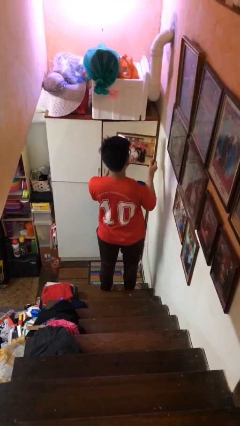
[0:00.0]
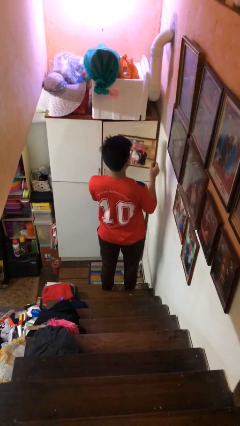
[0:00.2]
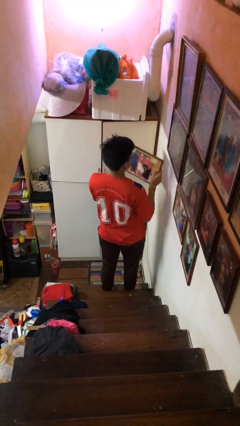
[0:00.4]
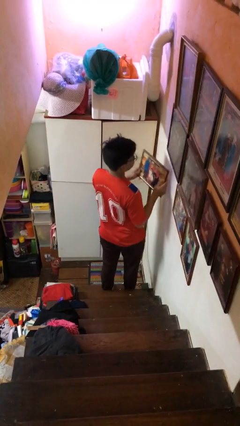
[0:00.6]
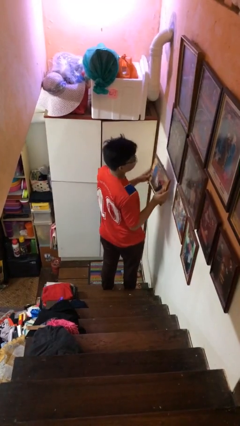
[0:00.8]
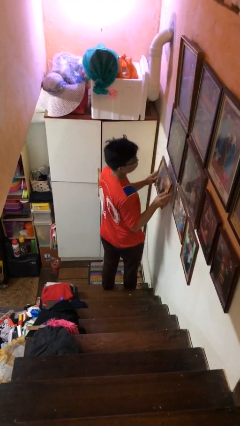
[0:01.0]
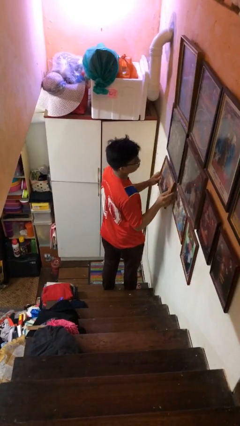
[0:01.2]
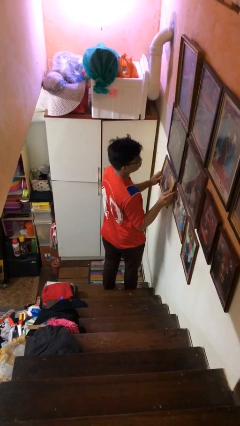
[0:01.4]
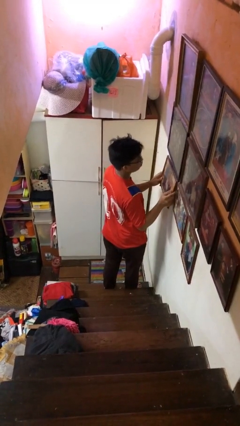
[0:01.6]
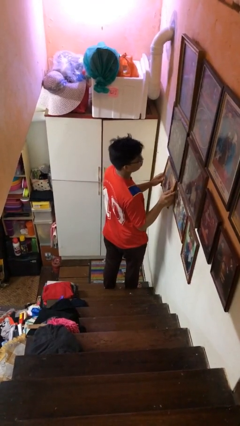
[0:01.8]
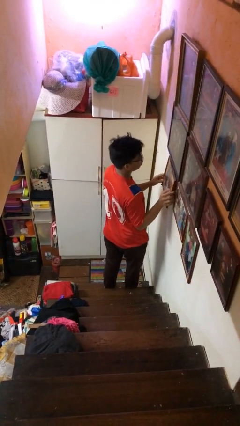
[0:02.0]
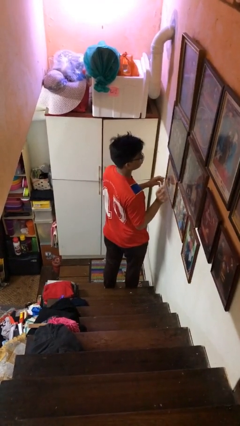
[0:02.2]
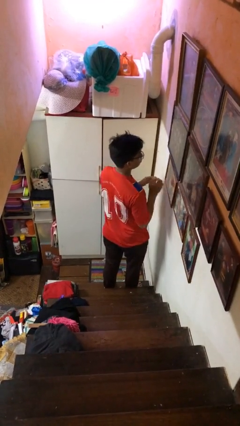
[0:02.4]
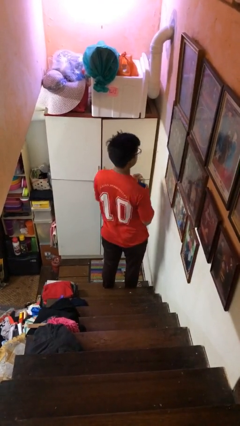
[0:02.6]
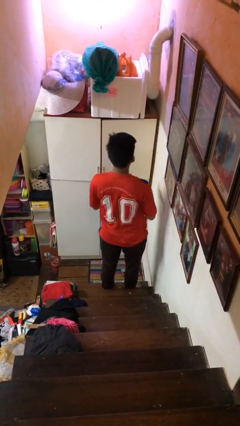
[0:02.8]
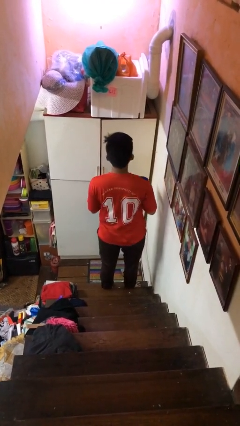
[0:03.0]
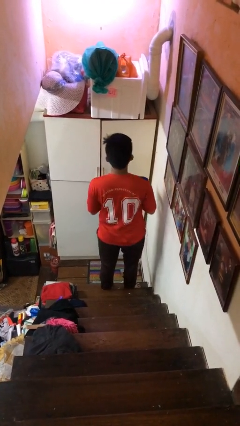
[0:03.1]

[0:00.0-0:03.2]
person puts up picture frame

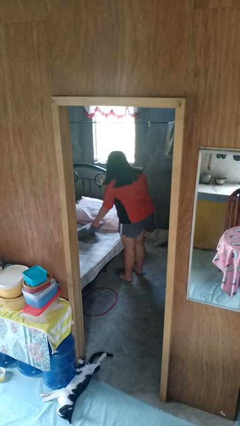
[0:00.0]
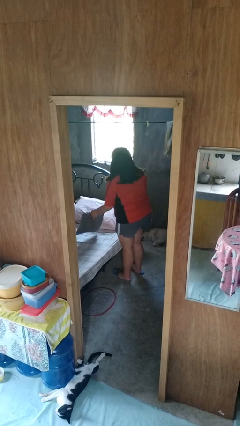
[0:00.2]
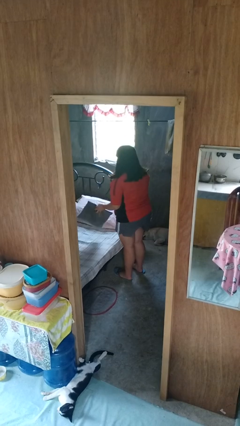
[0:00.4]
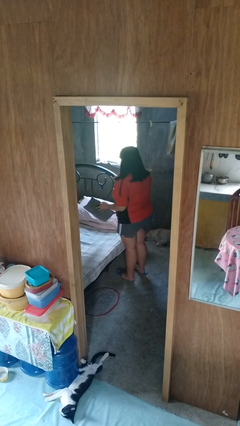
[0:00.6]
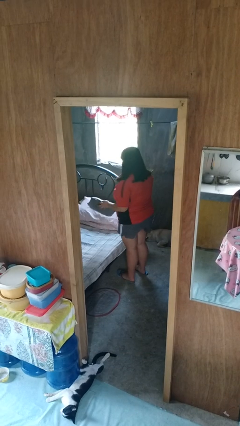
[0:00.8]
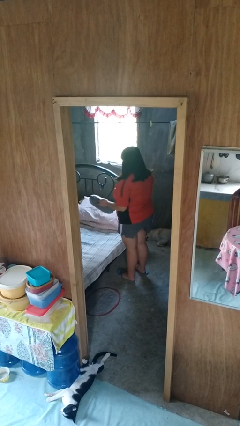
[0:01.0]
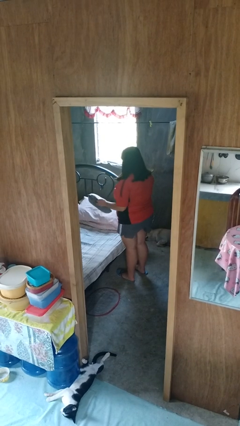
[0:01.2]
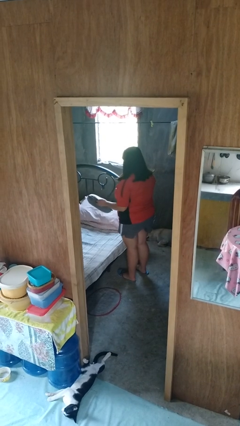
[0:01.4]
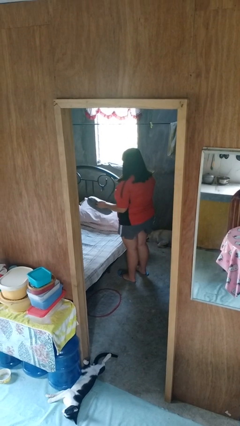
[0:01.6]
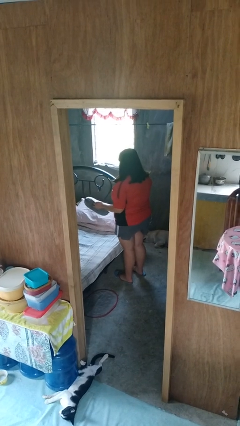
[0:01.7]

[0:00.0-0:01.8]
person picks up object from bed

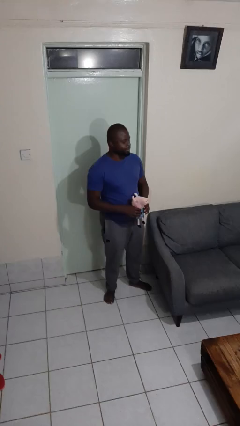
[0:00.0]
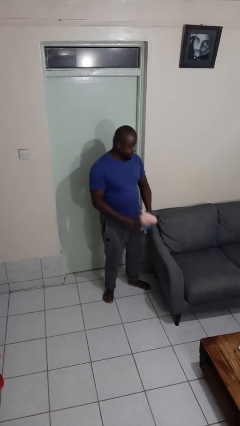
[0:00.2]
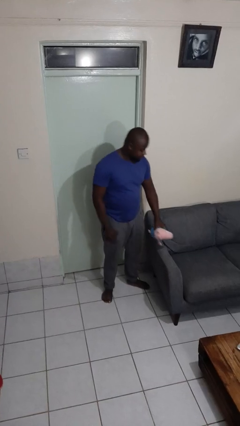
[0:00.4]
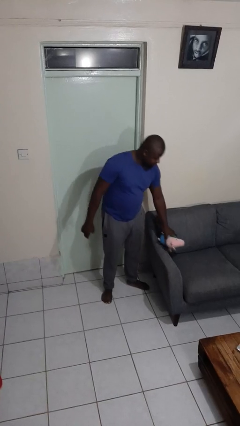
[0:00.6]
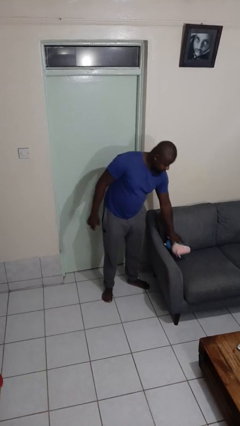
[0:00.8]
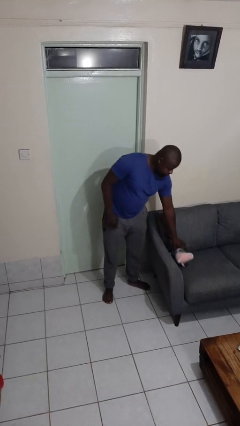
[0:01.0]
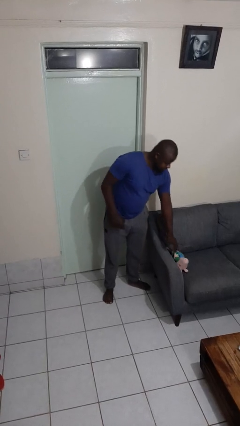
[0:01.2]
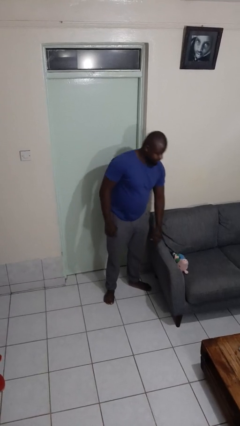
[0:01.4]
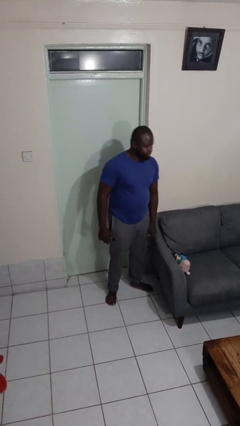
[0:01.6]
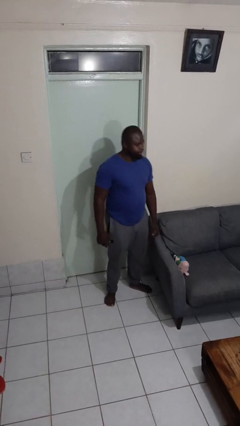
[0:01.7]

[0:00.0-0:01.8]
person puts down object on couch

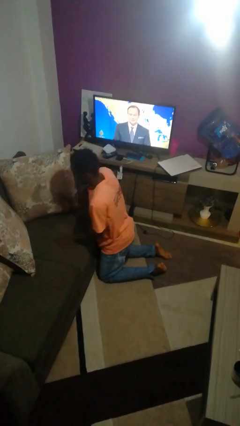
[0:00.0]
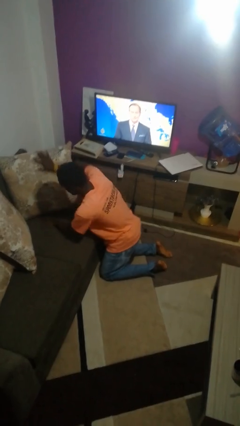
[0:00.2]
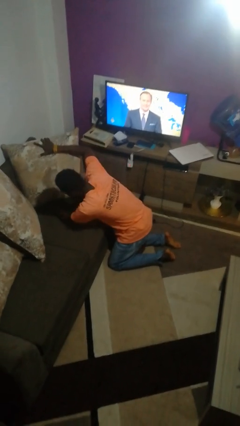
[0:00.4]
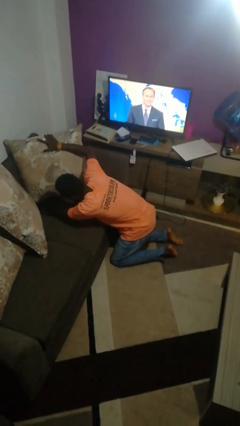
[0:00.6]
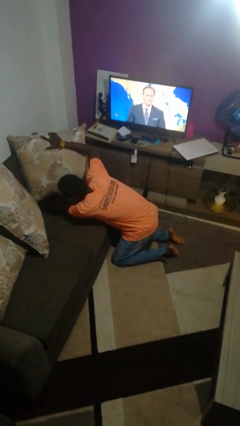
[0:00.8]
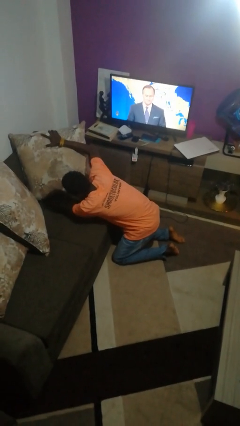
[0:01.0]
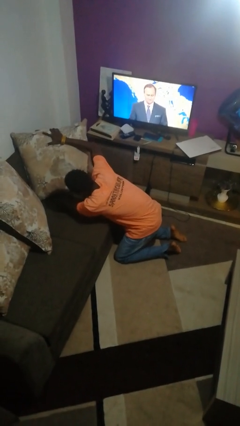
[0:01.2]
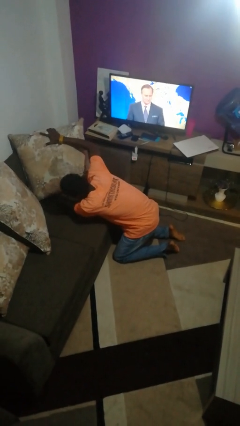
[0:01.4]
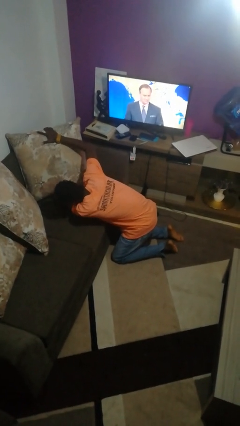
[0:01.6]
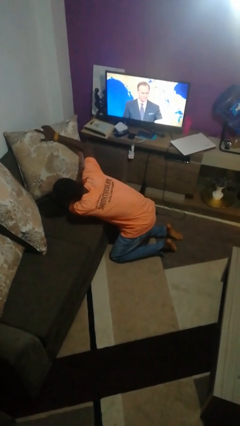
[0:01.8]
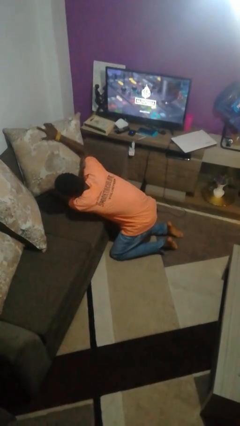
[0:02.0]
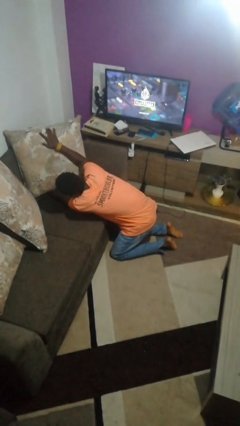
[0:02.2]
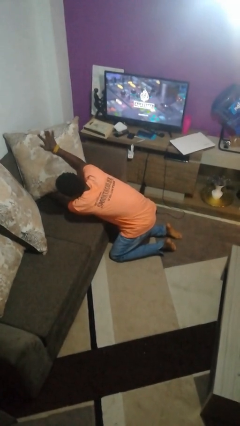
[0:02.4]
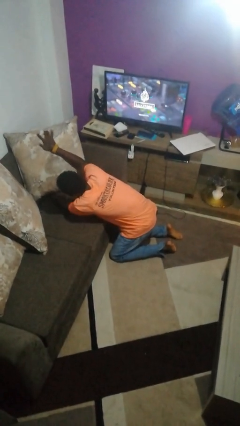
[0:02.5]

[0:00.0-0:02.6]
person searches in couch

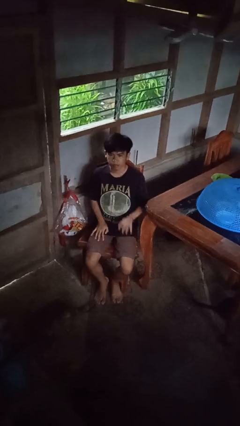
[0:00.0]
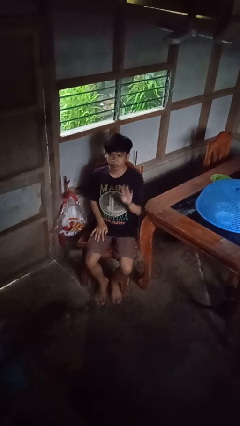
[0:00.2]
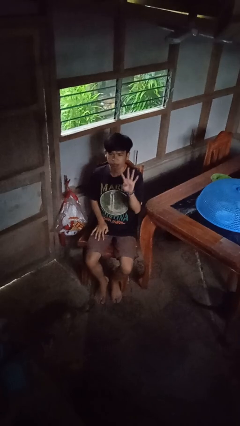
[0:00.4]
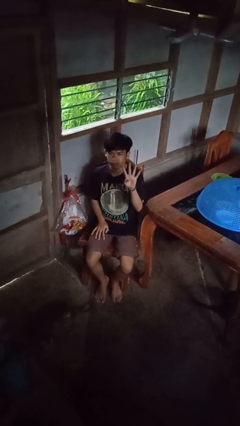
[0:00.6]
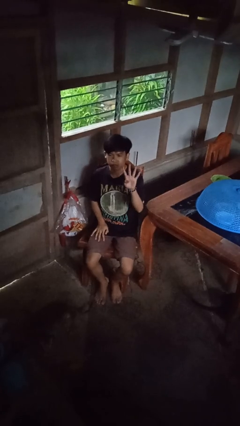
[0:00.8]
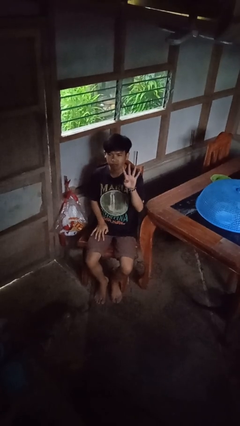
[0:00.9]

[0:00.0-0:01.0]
person gestures number four

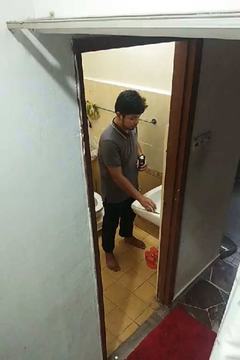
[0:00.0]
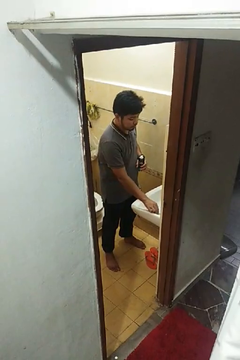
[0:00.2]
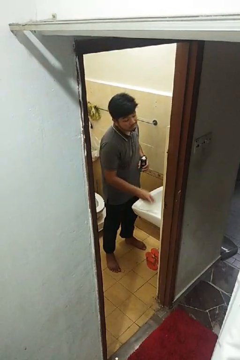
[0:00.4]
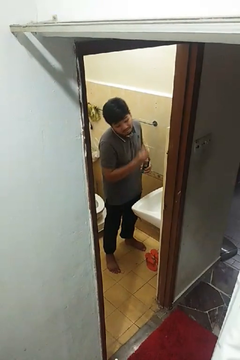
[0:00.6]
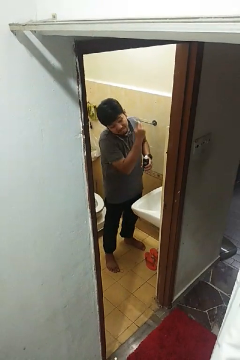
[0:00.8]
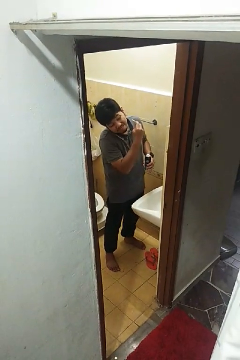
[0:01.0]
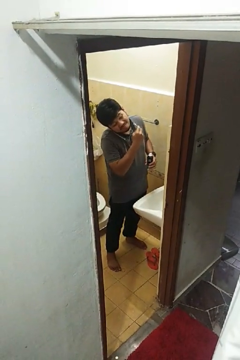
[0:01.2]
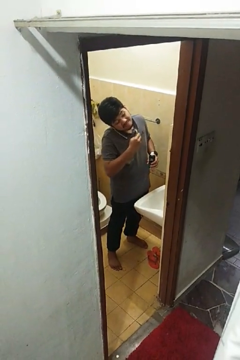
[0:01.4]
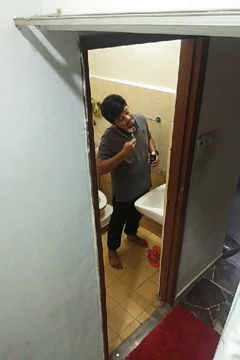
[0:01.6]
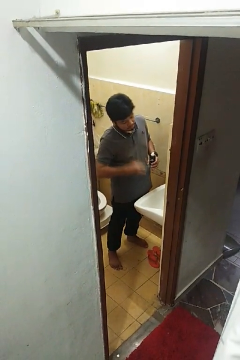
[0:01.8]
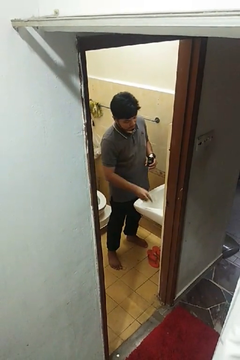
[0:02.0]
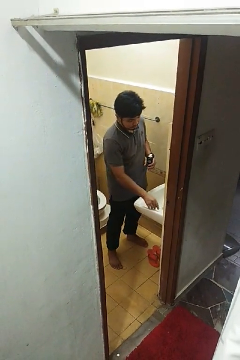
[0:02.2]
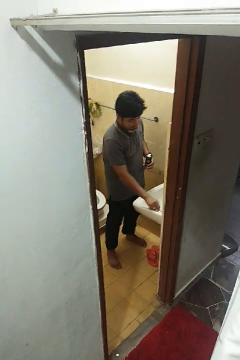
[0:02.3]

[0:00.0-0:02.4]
person shaves face

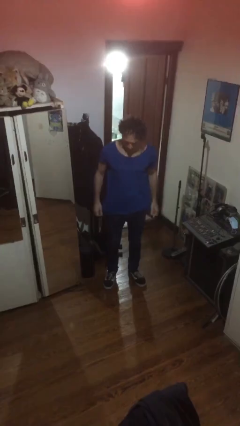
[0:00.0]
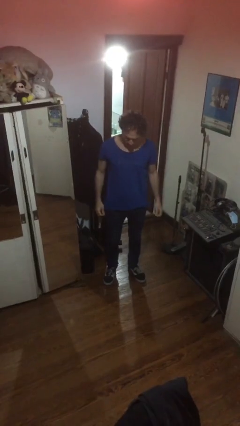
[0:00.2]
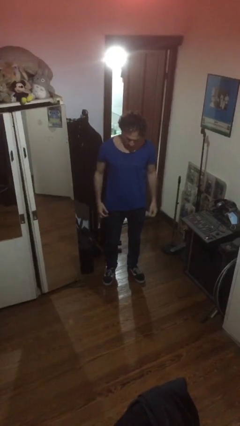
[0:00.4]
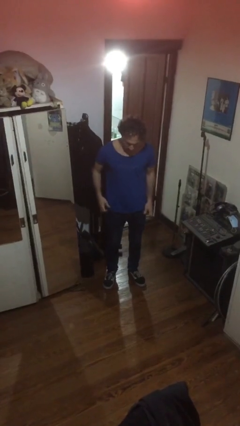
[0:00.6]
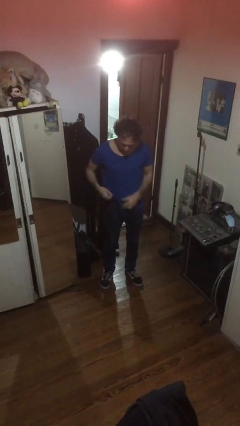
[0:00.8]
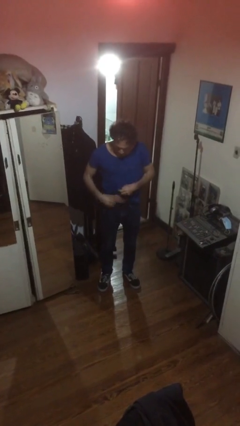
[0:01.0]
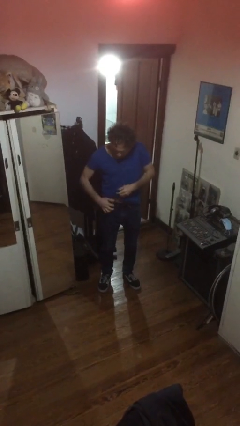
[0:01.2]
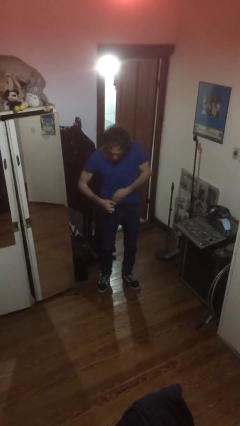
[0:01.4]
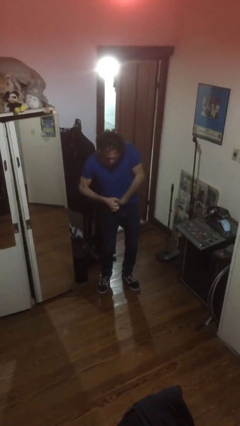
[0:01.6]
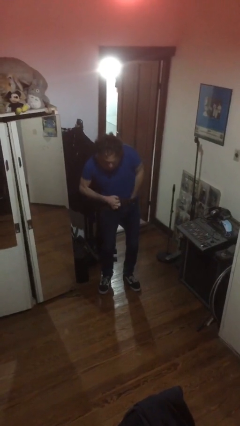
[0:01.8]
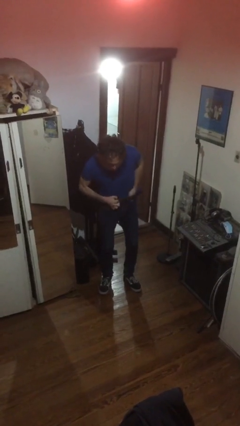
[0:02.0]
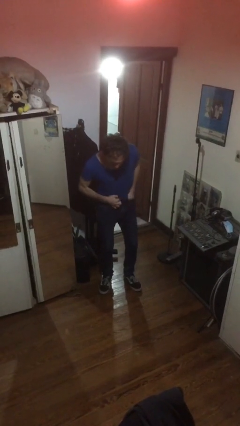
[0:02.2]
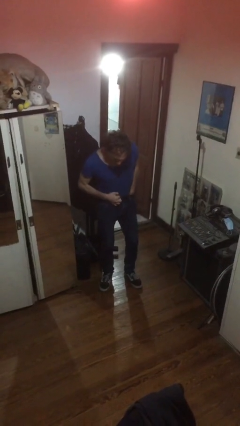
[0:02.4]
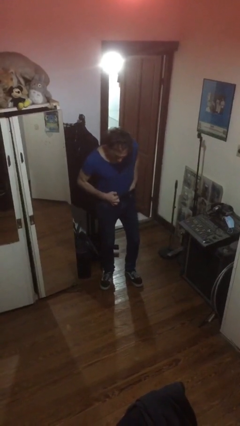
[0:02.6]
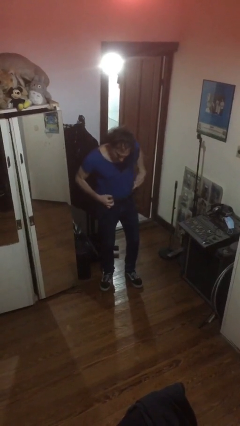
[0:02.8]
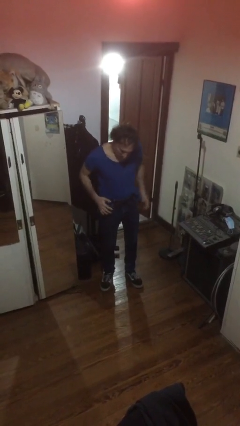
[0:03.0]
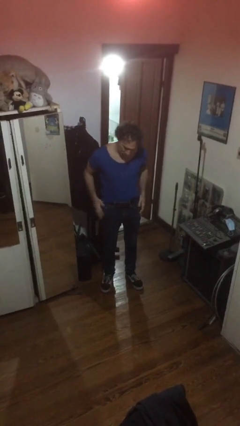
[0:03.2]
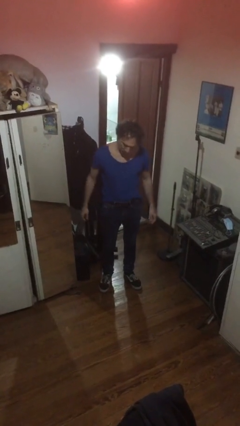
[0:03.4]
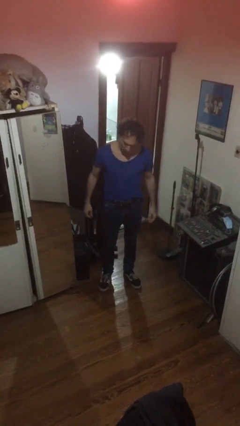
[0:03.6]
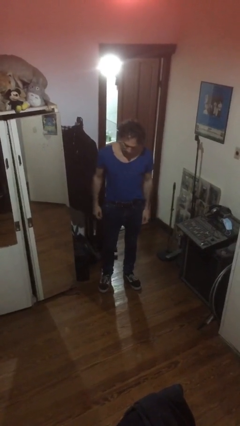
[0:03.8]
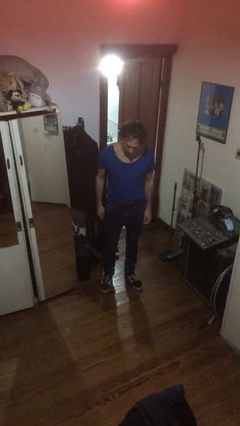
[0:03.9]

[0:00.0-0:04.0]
person tucks in shirt

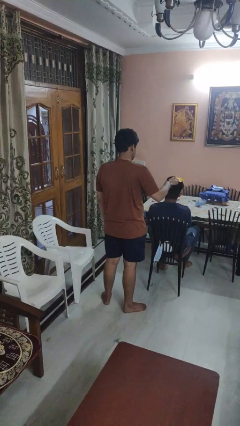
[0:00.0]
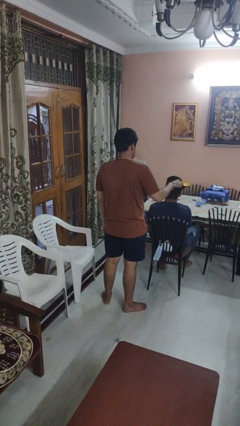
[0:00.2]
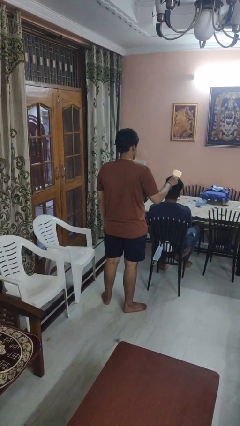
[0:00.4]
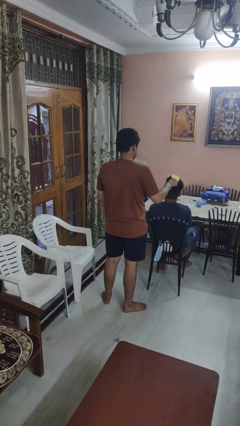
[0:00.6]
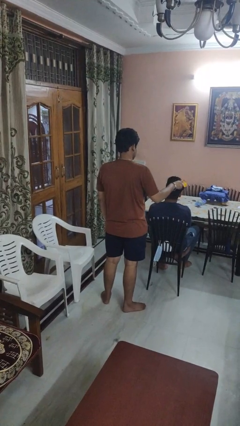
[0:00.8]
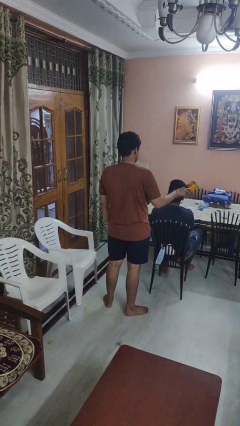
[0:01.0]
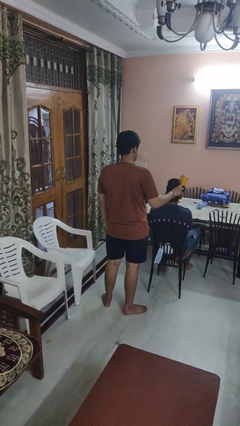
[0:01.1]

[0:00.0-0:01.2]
person brushes hair of person
